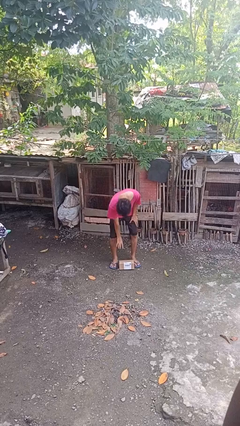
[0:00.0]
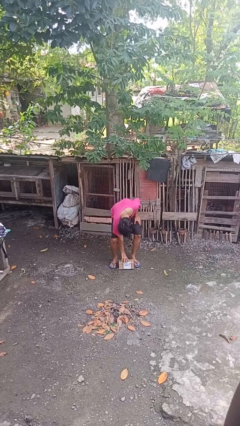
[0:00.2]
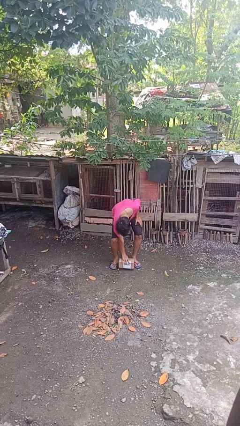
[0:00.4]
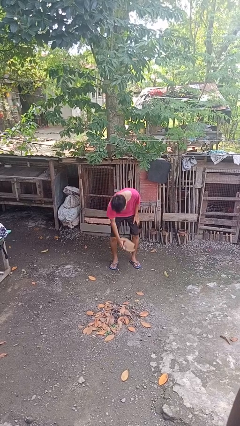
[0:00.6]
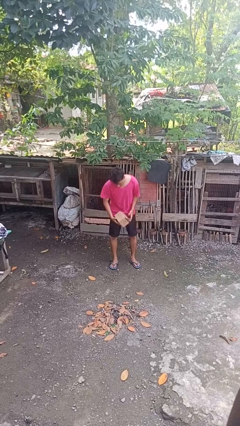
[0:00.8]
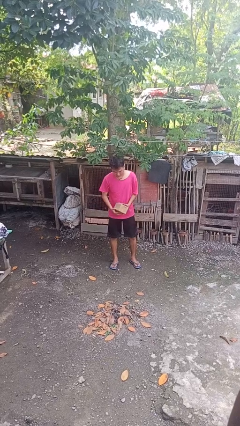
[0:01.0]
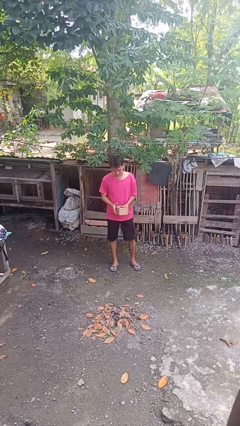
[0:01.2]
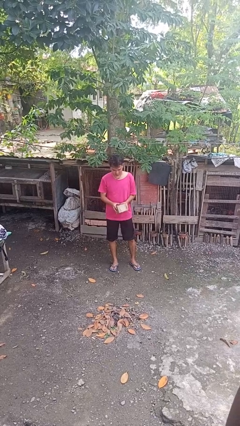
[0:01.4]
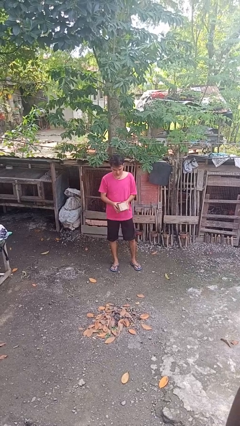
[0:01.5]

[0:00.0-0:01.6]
person picks up object from floor

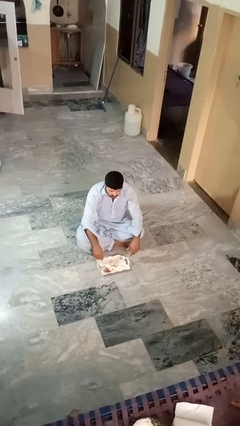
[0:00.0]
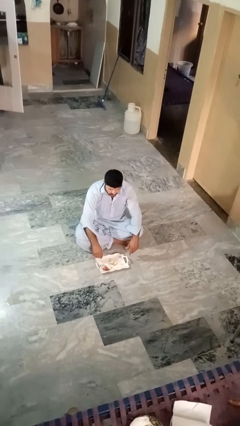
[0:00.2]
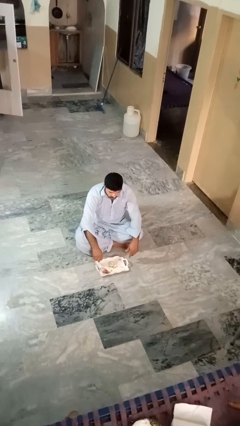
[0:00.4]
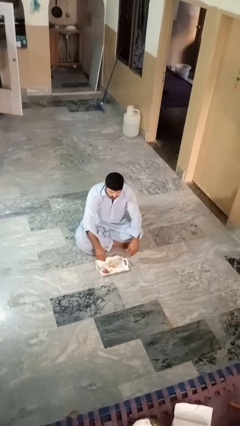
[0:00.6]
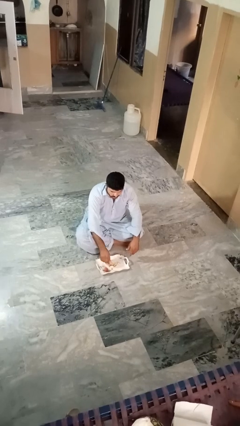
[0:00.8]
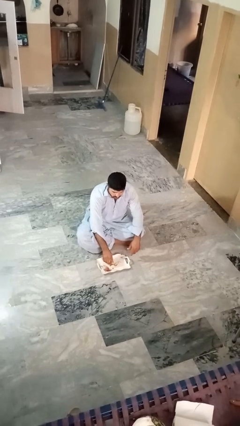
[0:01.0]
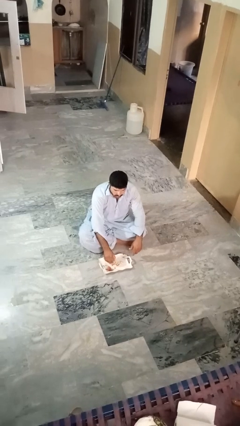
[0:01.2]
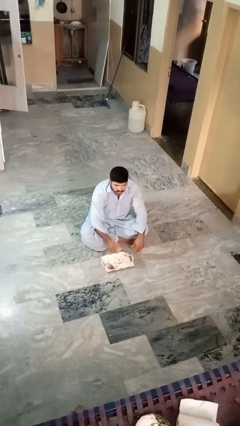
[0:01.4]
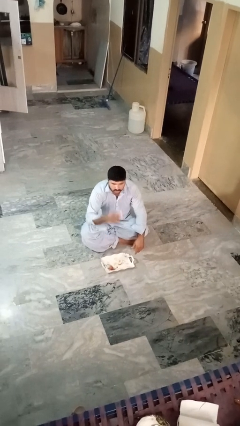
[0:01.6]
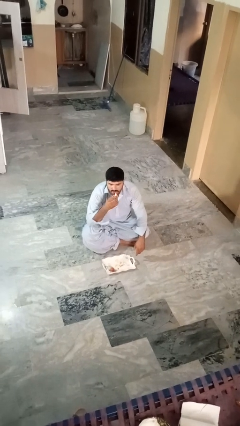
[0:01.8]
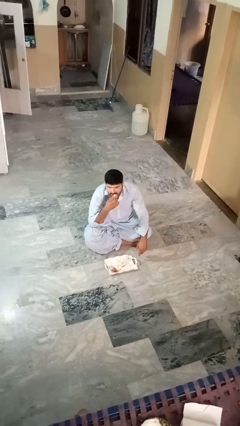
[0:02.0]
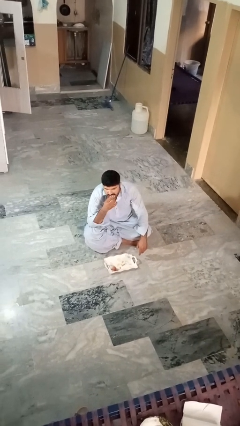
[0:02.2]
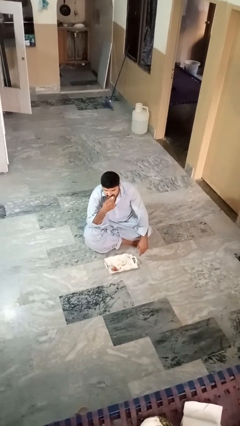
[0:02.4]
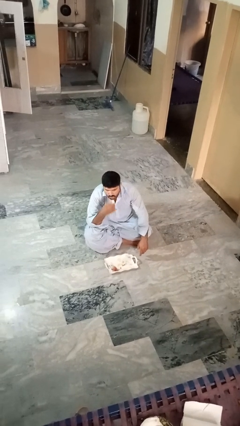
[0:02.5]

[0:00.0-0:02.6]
person eats apple

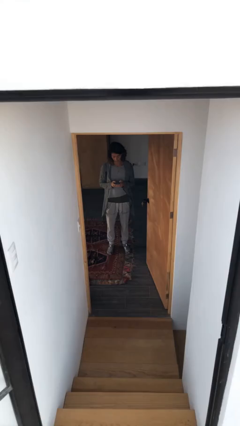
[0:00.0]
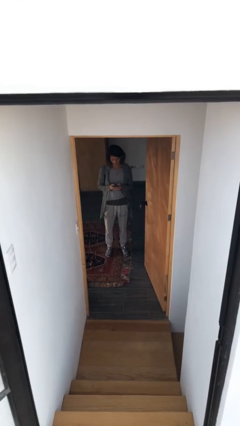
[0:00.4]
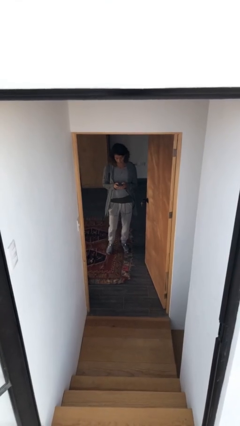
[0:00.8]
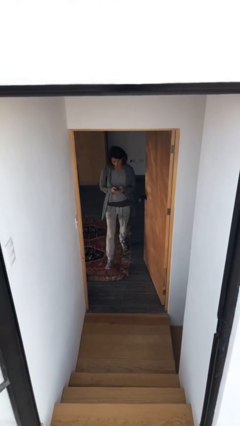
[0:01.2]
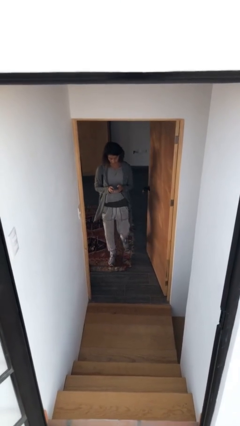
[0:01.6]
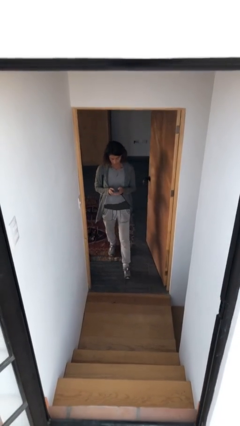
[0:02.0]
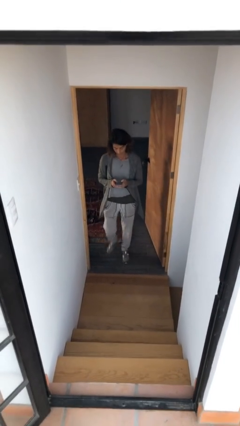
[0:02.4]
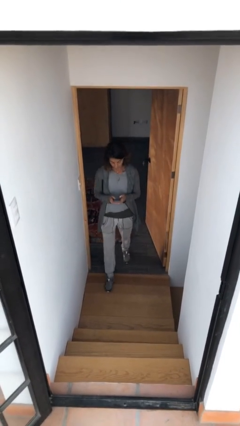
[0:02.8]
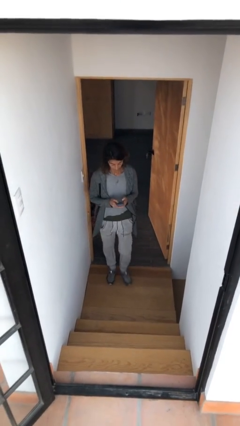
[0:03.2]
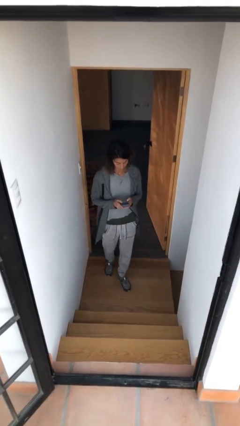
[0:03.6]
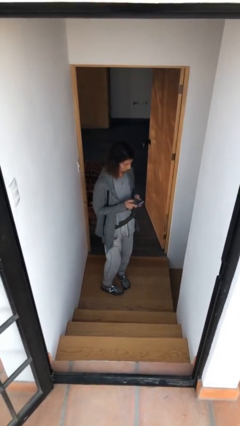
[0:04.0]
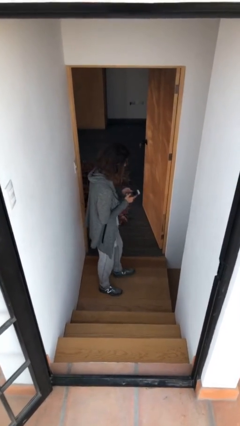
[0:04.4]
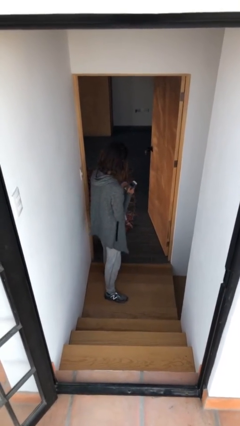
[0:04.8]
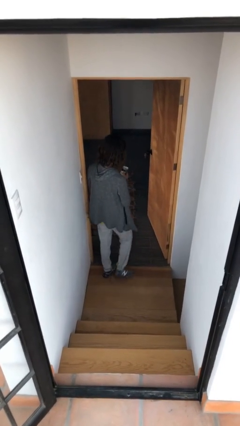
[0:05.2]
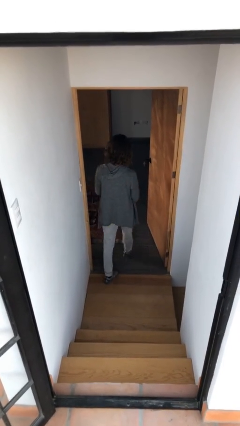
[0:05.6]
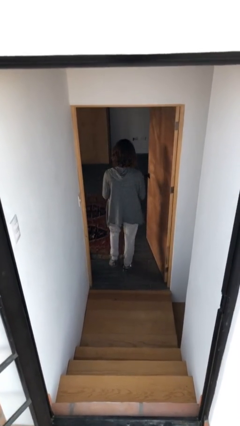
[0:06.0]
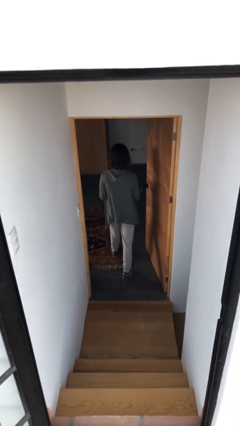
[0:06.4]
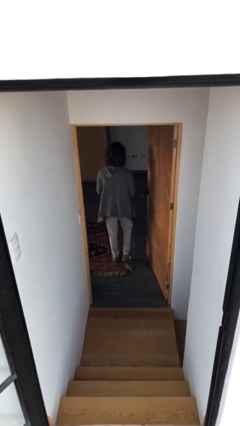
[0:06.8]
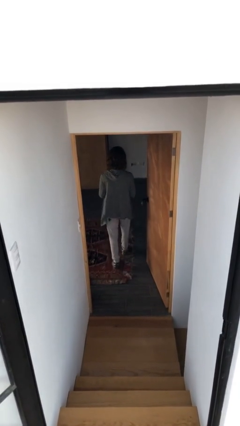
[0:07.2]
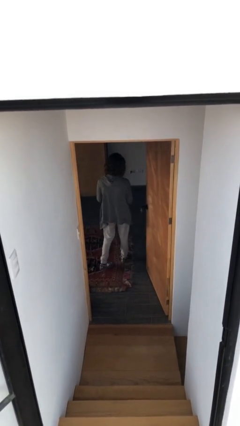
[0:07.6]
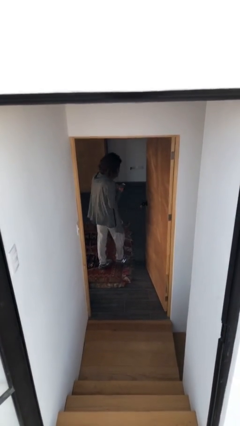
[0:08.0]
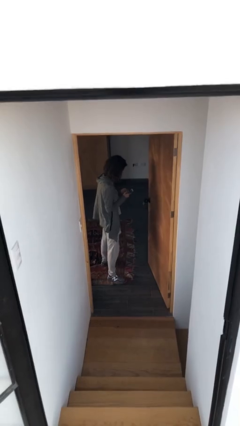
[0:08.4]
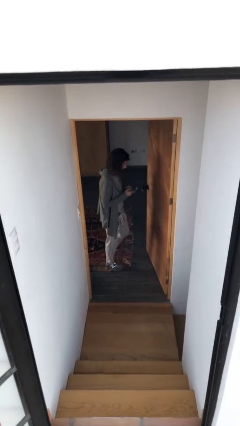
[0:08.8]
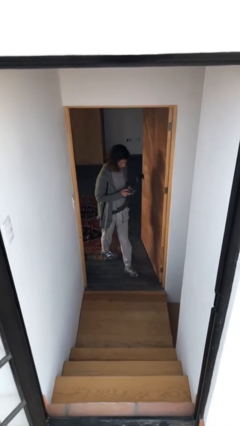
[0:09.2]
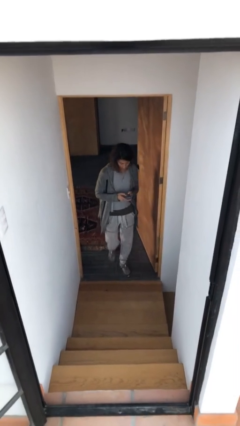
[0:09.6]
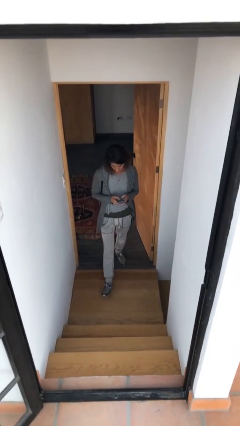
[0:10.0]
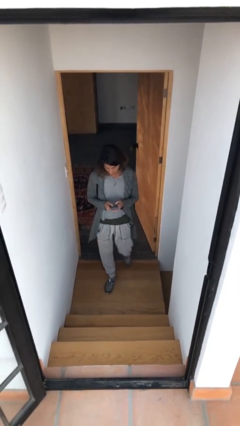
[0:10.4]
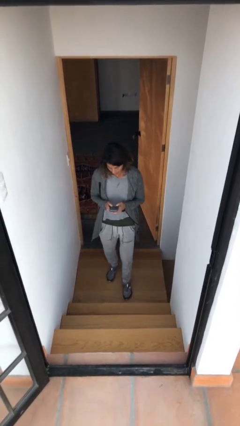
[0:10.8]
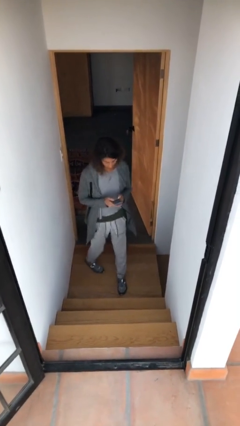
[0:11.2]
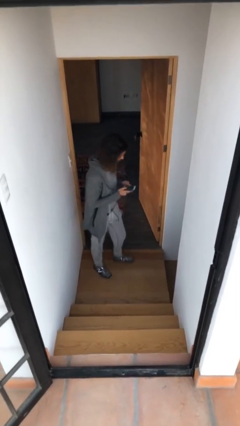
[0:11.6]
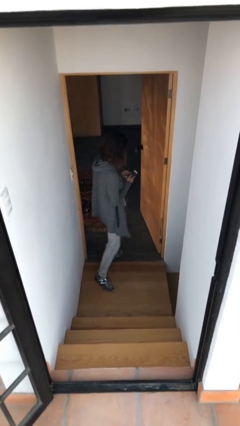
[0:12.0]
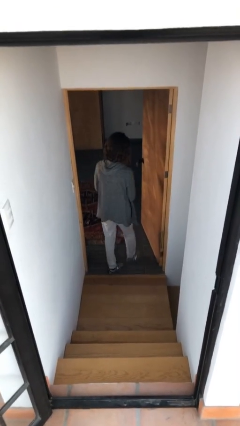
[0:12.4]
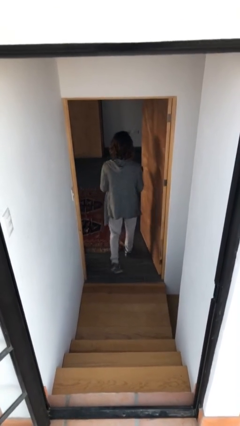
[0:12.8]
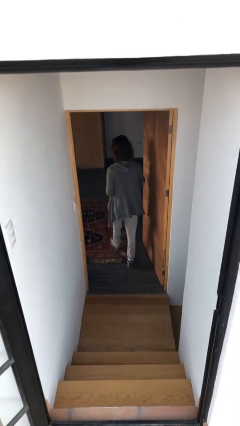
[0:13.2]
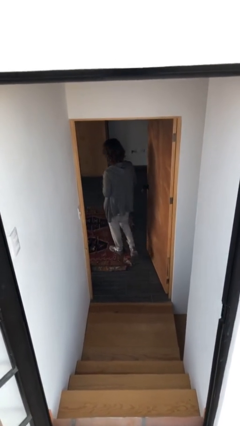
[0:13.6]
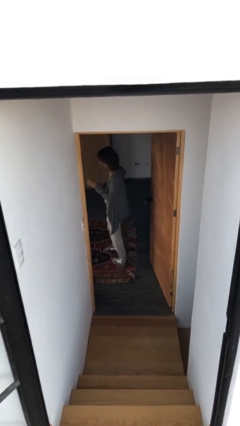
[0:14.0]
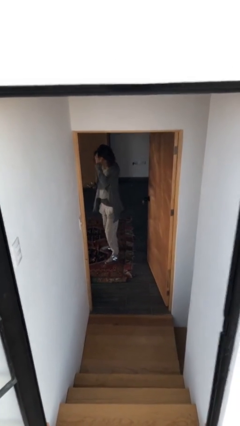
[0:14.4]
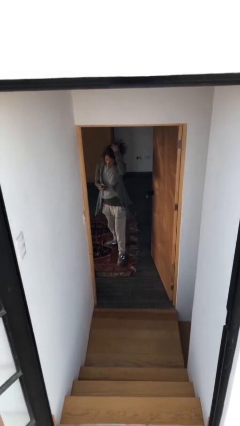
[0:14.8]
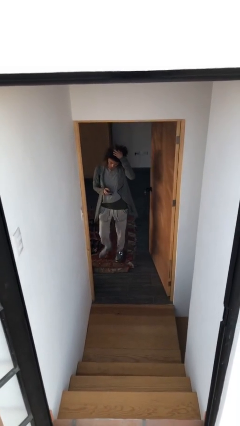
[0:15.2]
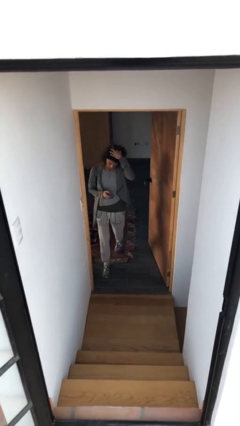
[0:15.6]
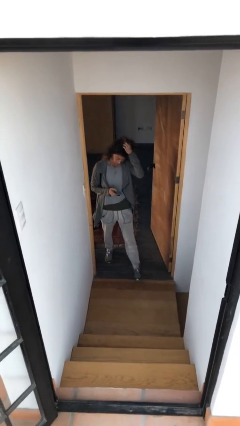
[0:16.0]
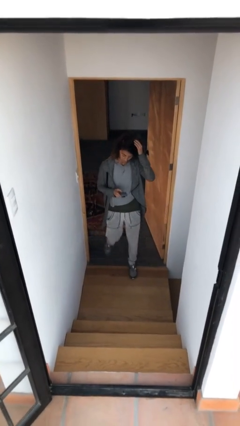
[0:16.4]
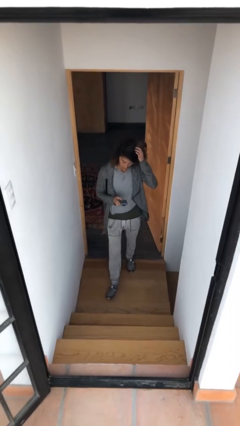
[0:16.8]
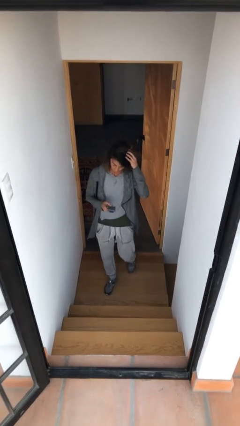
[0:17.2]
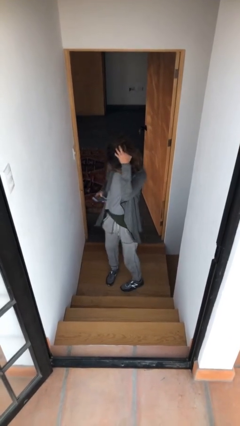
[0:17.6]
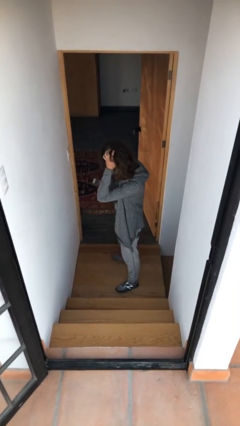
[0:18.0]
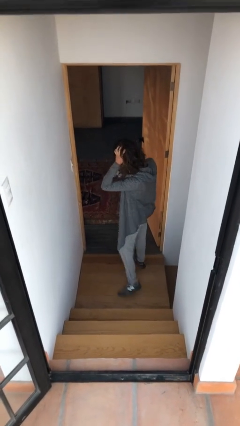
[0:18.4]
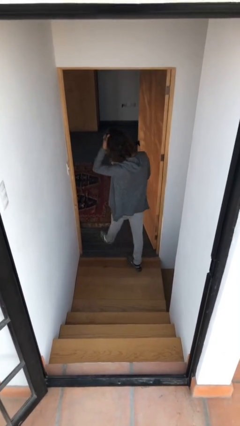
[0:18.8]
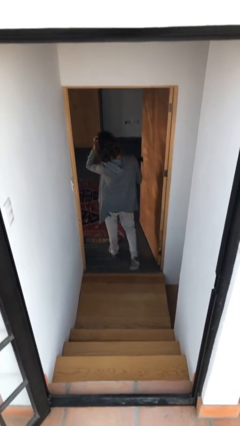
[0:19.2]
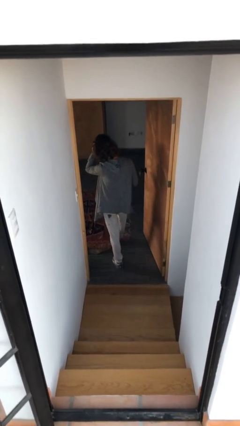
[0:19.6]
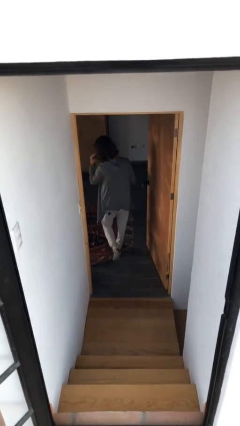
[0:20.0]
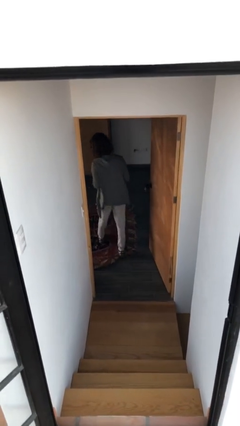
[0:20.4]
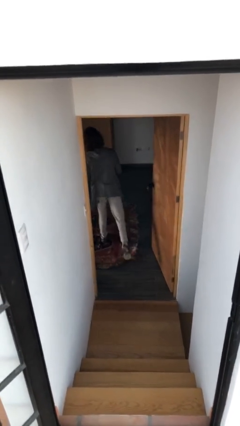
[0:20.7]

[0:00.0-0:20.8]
person texts on phone

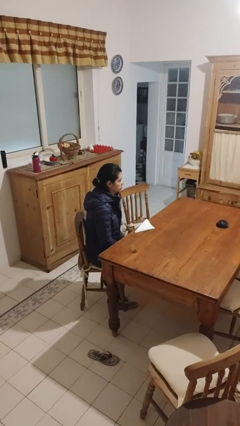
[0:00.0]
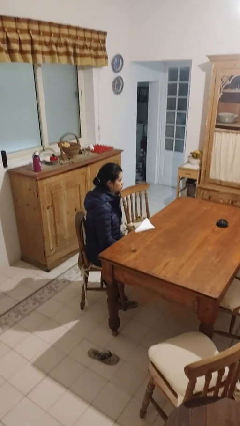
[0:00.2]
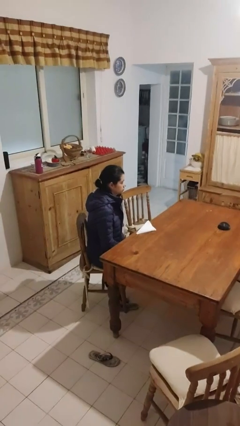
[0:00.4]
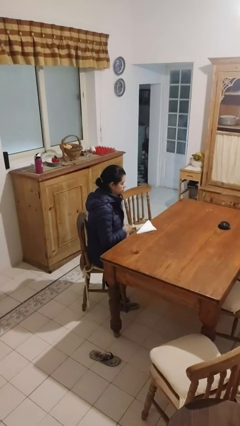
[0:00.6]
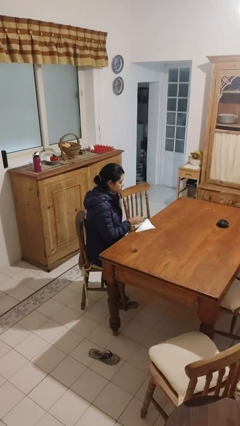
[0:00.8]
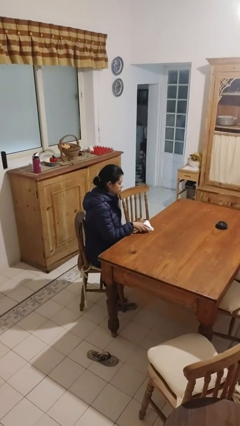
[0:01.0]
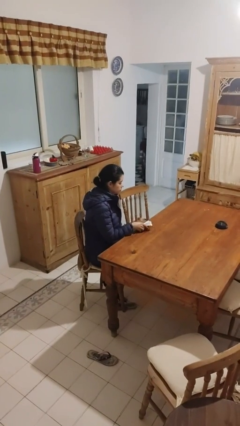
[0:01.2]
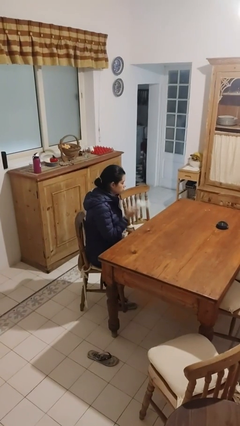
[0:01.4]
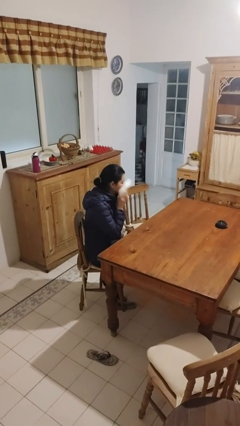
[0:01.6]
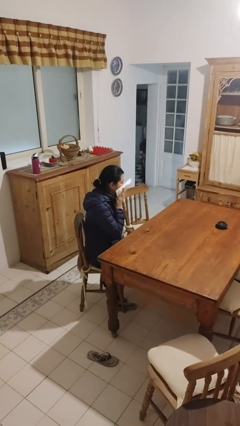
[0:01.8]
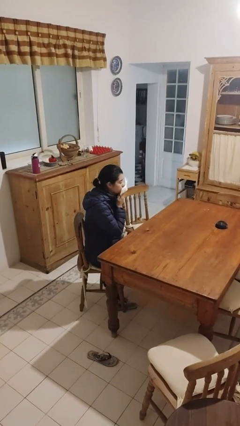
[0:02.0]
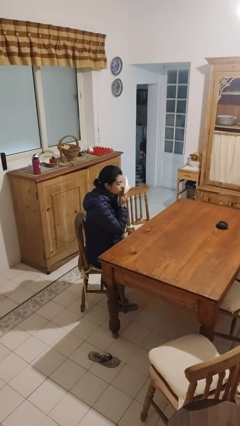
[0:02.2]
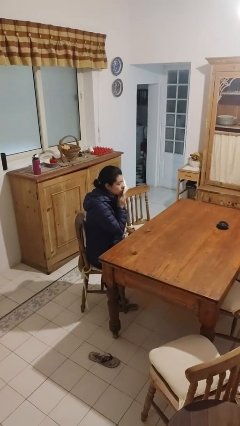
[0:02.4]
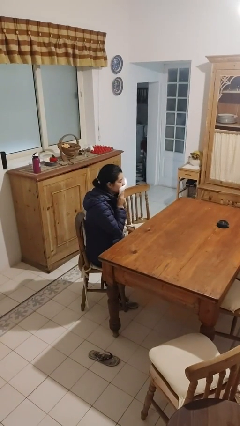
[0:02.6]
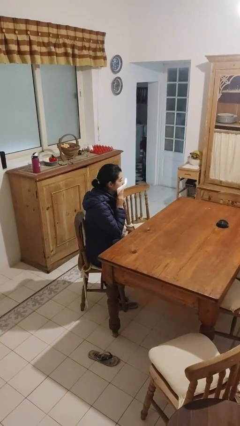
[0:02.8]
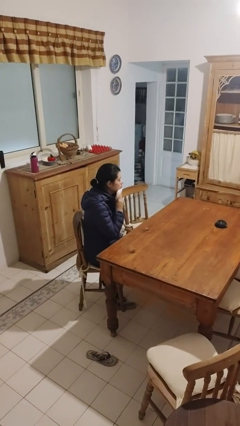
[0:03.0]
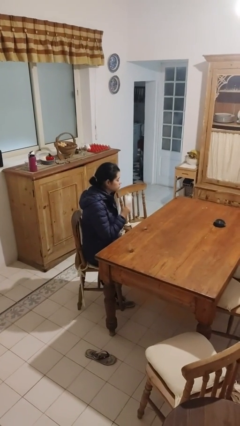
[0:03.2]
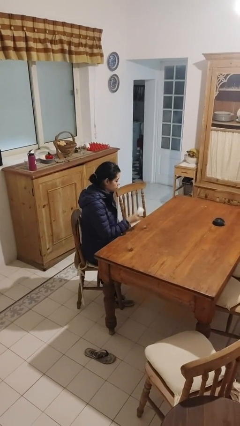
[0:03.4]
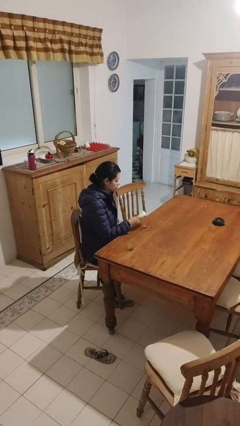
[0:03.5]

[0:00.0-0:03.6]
person wipes mouth with napkin
